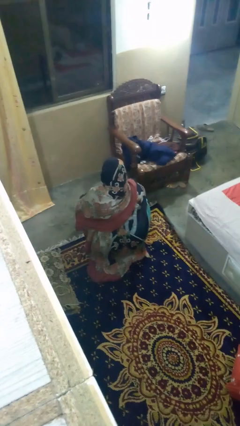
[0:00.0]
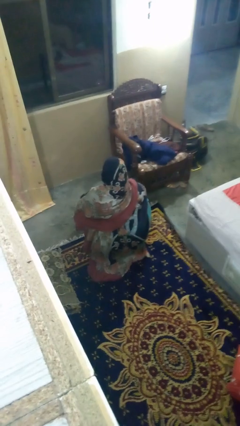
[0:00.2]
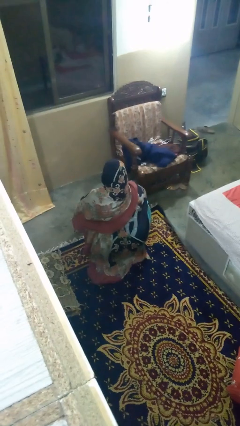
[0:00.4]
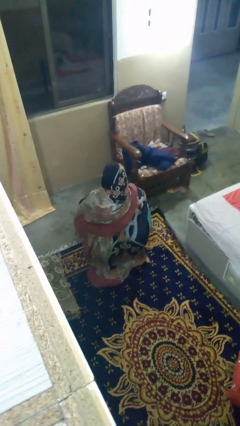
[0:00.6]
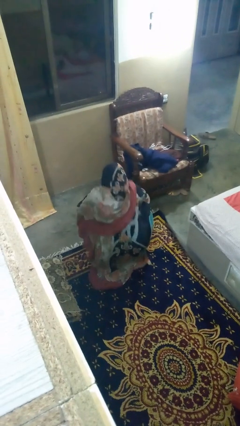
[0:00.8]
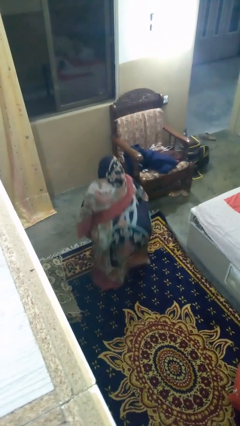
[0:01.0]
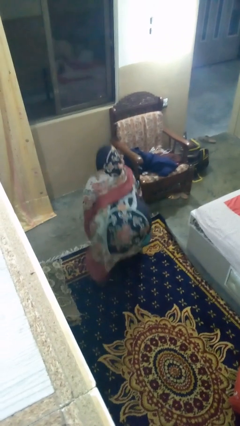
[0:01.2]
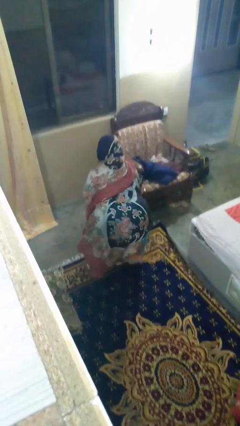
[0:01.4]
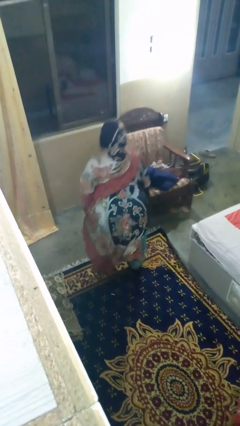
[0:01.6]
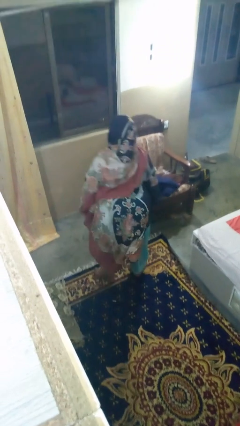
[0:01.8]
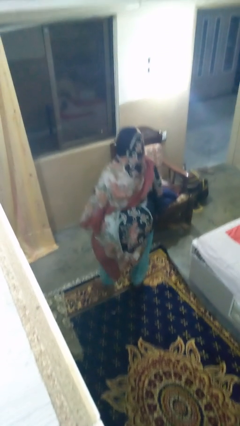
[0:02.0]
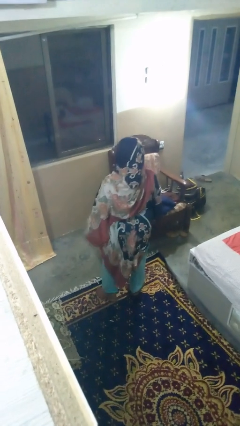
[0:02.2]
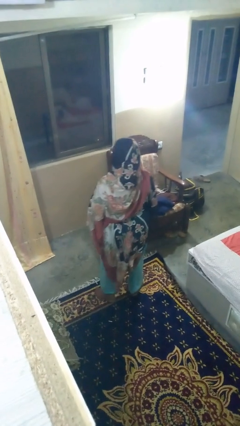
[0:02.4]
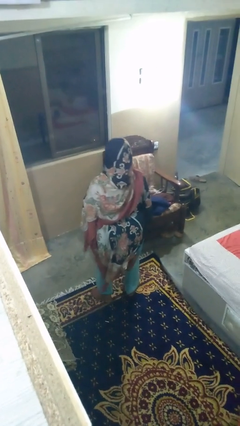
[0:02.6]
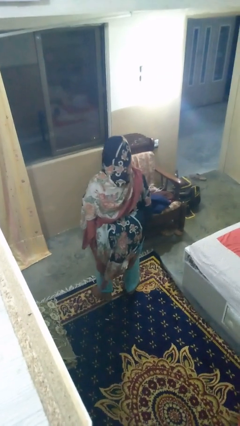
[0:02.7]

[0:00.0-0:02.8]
person stands up

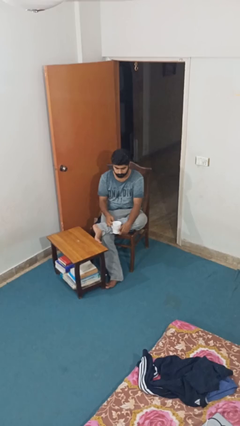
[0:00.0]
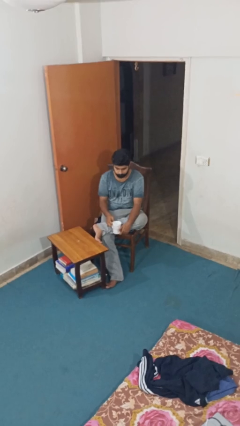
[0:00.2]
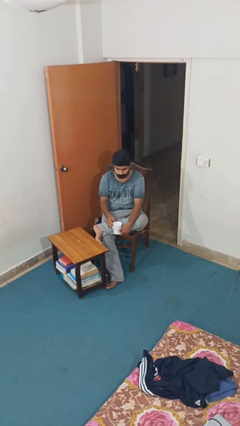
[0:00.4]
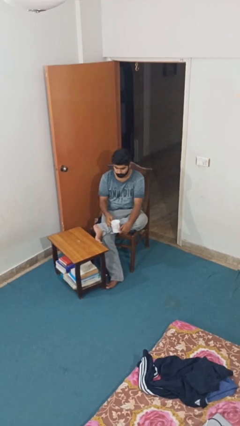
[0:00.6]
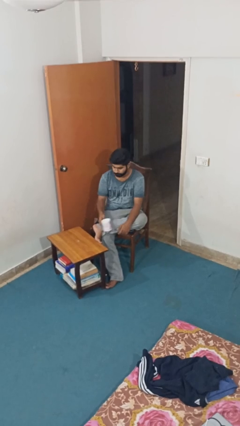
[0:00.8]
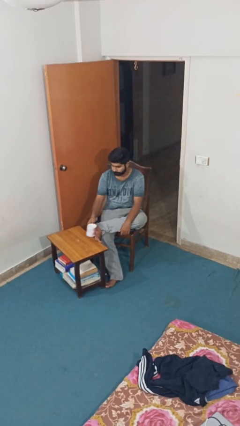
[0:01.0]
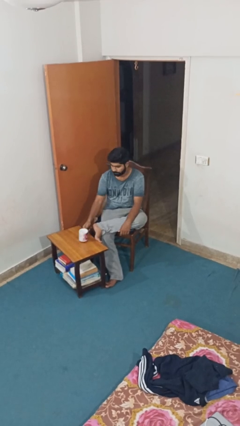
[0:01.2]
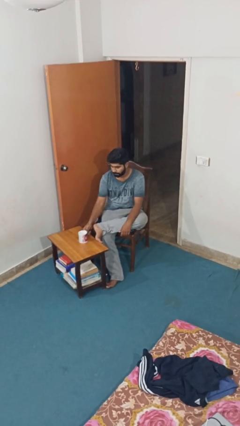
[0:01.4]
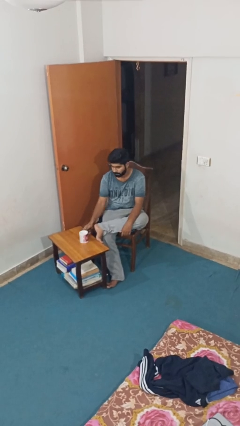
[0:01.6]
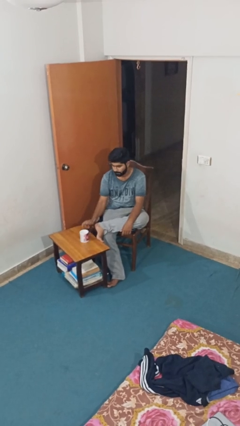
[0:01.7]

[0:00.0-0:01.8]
person puts down object on table

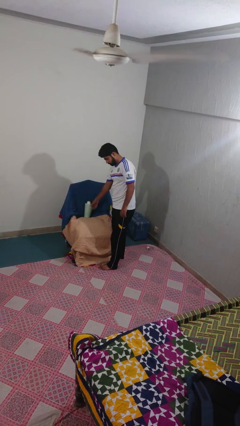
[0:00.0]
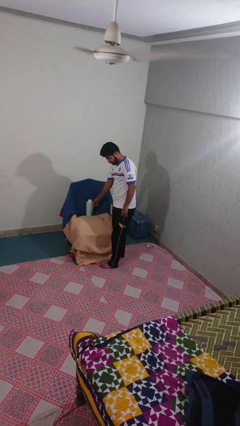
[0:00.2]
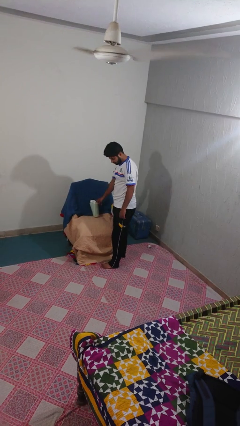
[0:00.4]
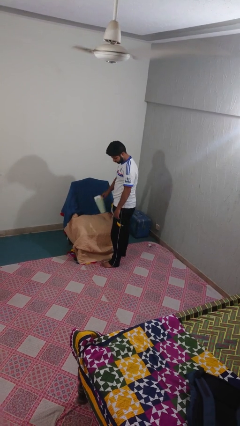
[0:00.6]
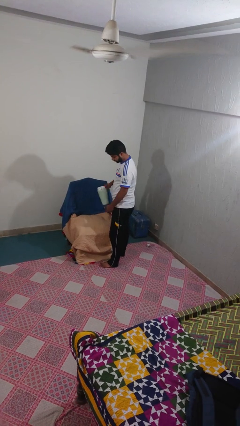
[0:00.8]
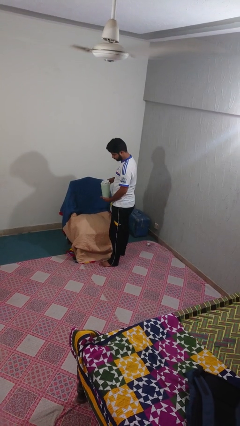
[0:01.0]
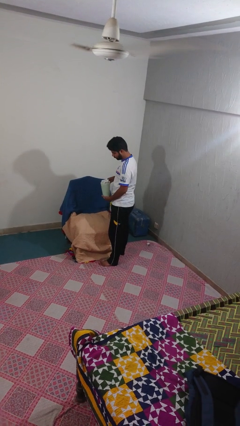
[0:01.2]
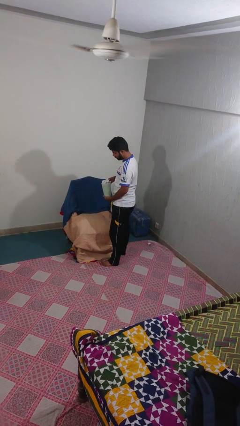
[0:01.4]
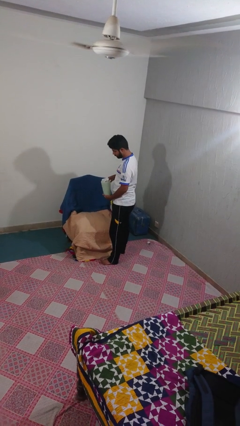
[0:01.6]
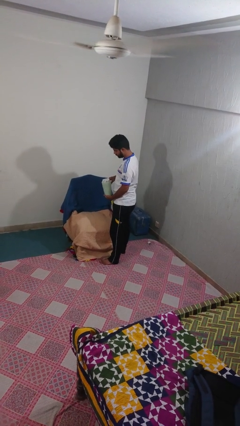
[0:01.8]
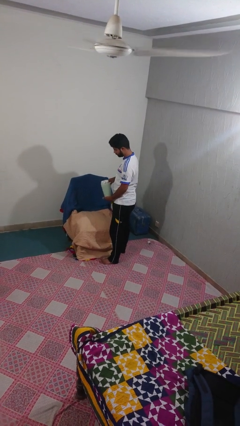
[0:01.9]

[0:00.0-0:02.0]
person picks up object from couch

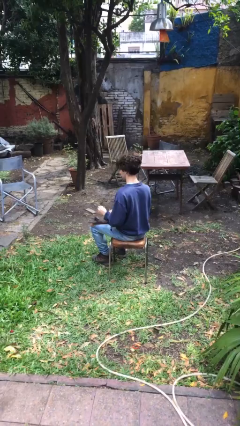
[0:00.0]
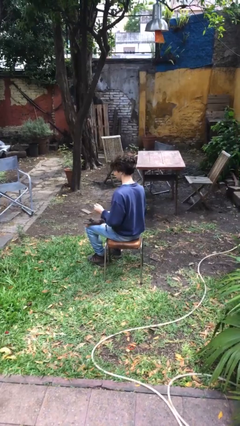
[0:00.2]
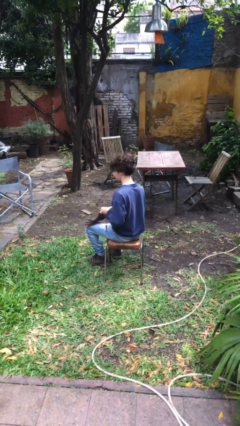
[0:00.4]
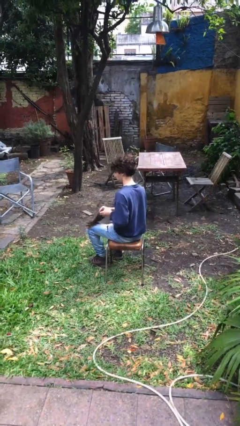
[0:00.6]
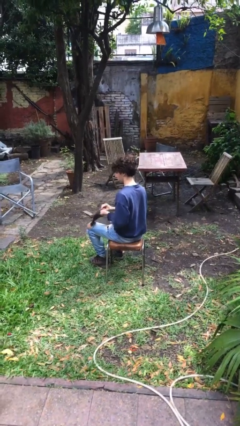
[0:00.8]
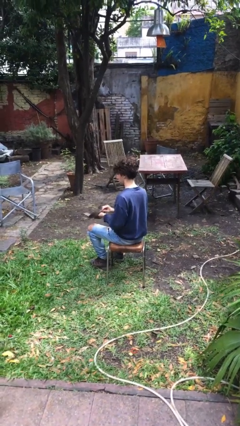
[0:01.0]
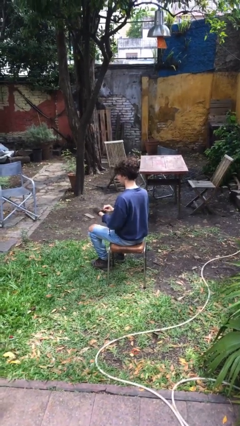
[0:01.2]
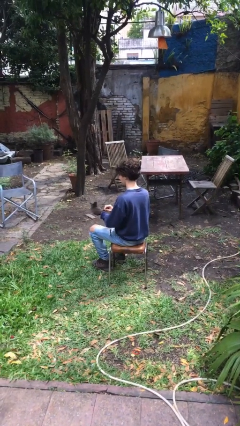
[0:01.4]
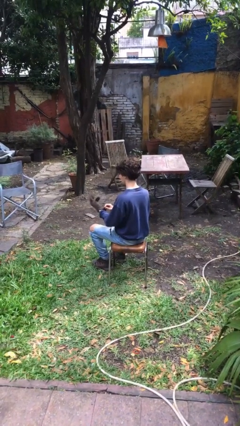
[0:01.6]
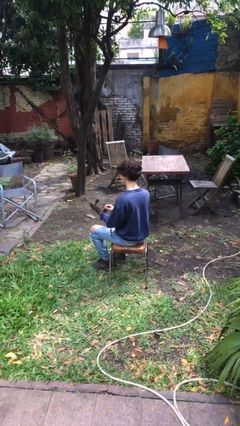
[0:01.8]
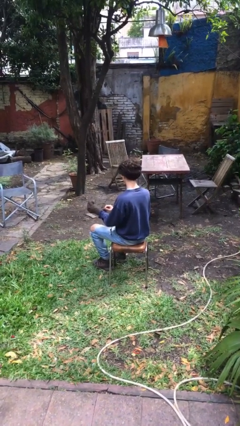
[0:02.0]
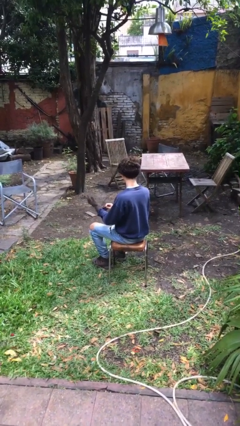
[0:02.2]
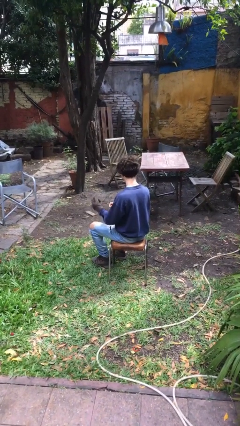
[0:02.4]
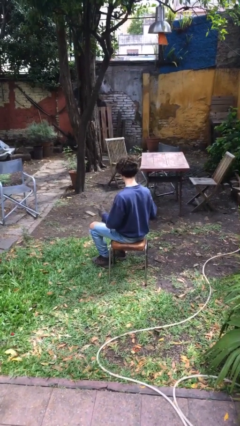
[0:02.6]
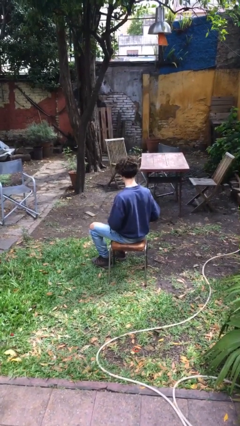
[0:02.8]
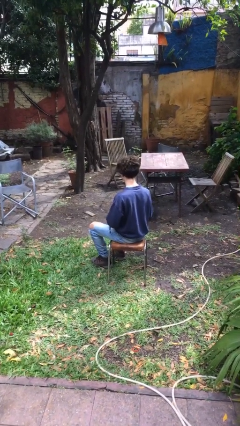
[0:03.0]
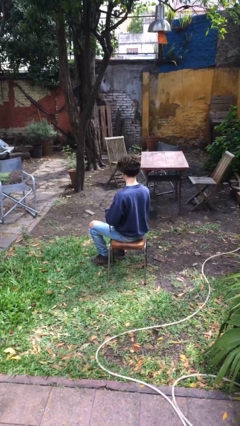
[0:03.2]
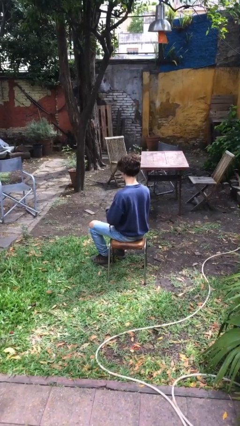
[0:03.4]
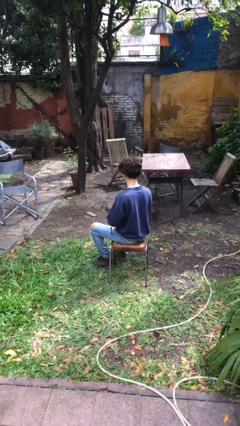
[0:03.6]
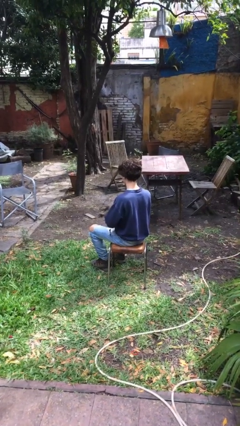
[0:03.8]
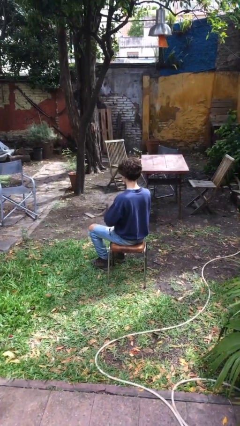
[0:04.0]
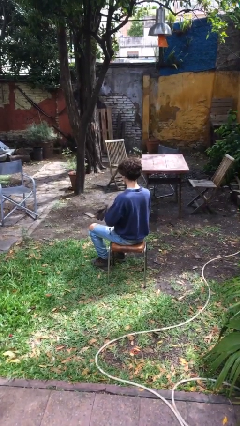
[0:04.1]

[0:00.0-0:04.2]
person puts on gloves

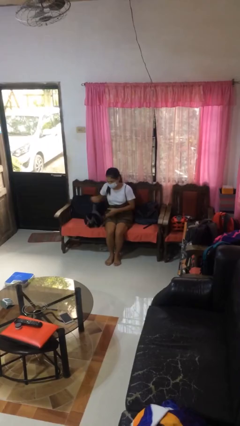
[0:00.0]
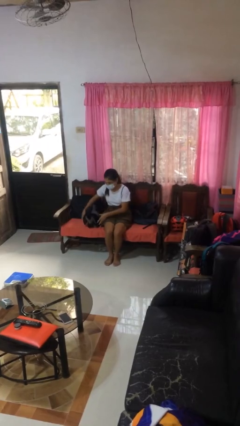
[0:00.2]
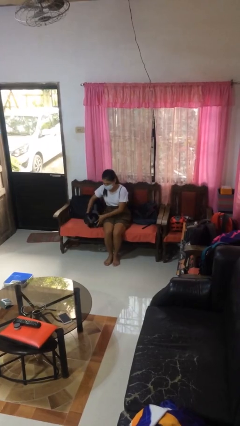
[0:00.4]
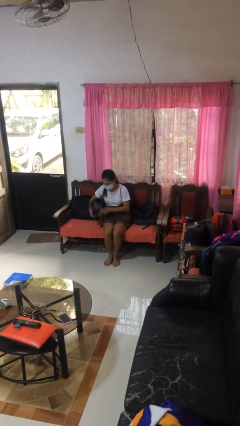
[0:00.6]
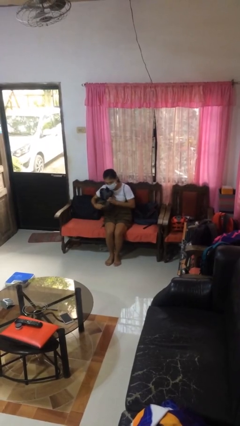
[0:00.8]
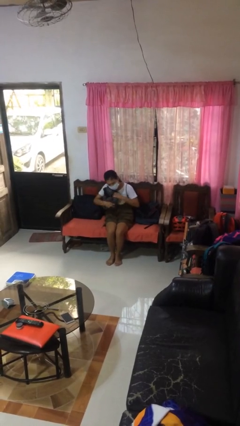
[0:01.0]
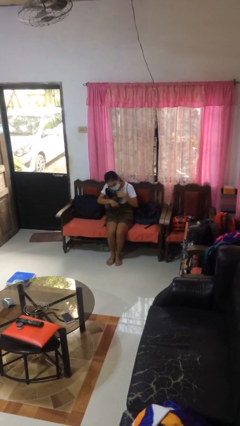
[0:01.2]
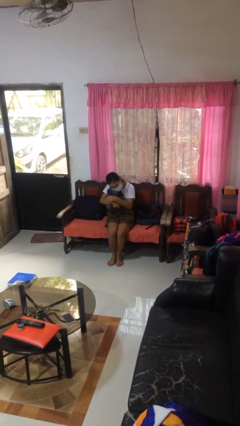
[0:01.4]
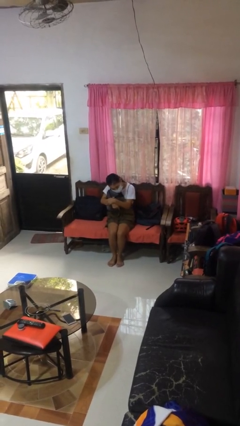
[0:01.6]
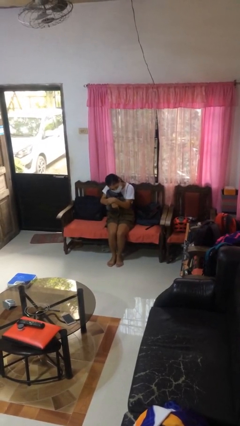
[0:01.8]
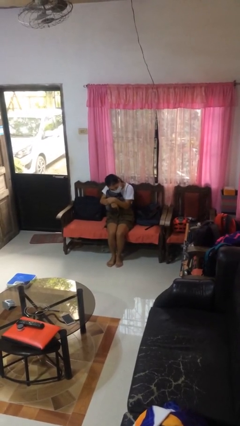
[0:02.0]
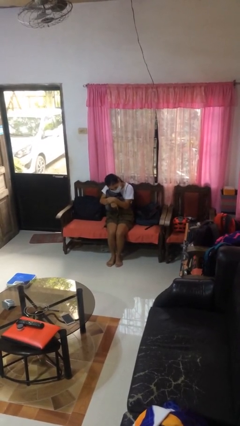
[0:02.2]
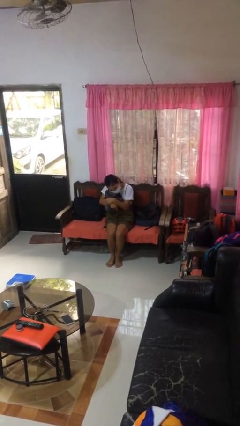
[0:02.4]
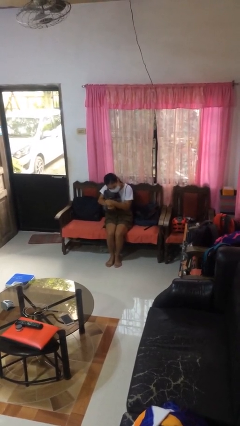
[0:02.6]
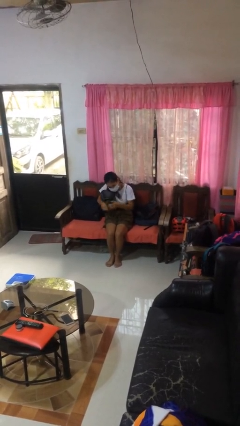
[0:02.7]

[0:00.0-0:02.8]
person hugs stuffed animal

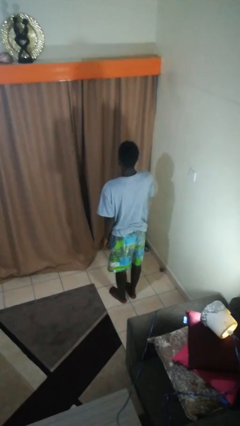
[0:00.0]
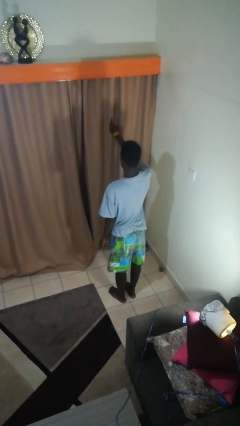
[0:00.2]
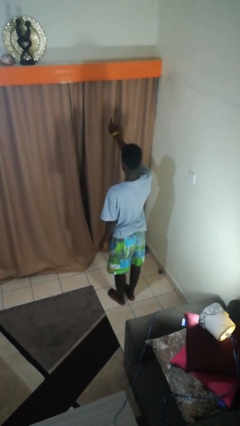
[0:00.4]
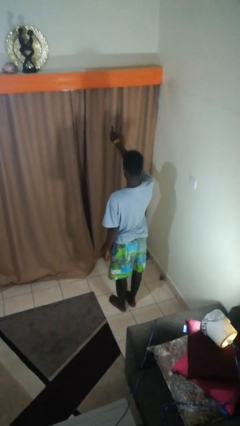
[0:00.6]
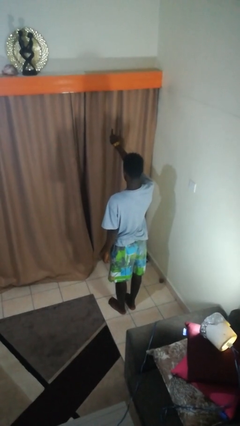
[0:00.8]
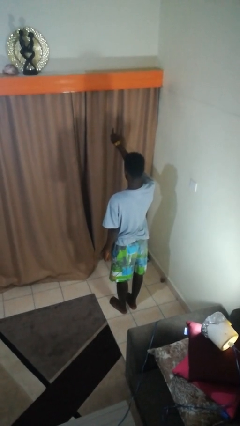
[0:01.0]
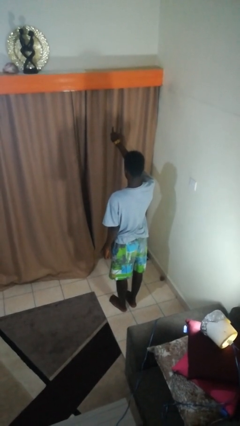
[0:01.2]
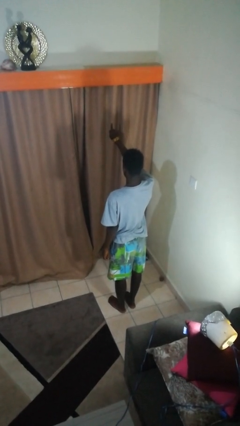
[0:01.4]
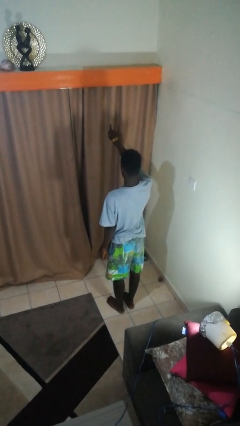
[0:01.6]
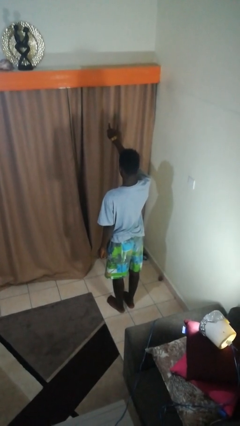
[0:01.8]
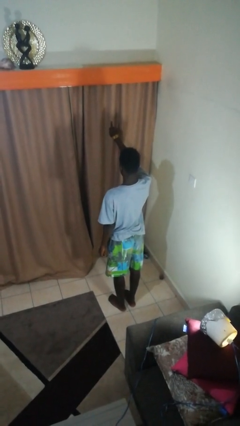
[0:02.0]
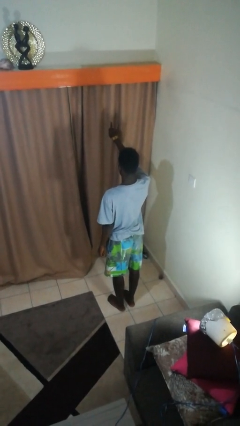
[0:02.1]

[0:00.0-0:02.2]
person gestures number one

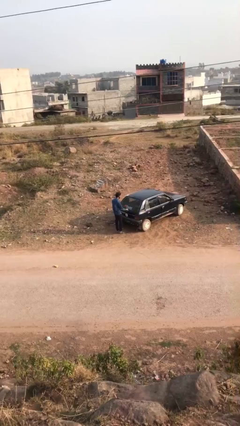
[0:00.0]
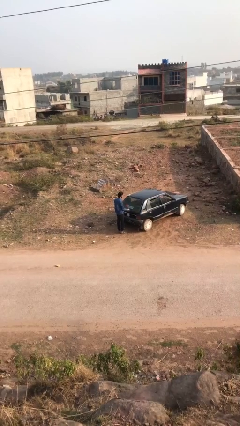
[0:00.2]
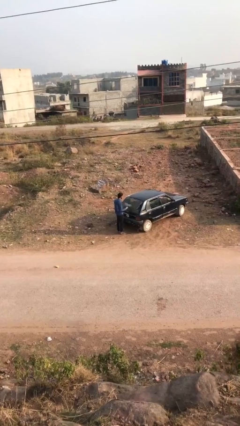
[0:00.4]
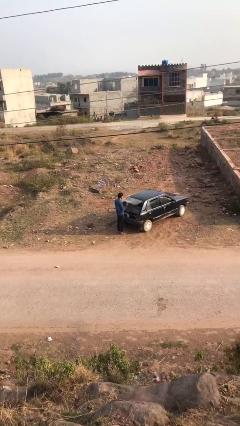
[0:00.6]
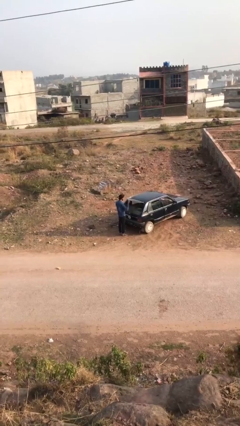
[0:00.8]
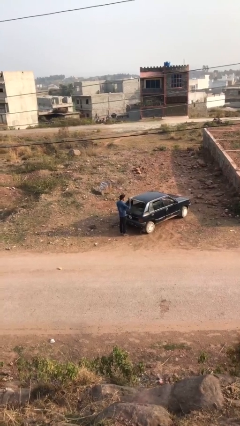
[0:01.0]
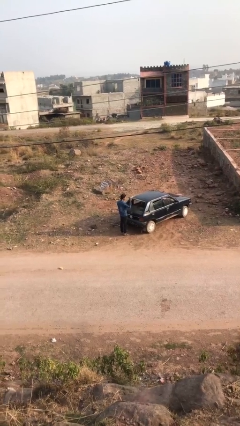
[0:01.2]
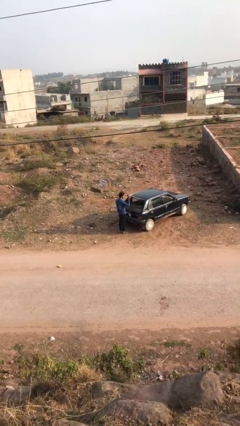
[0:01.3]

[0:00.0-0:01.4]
person opens car trunk

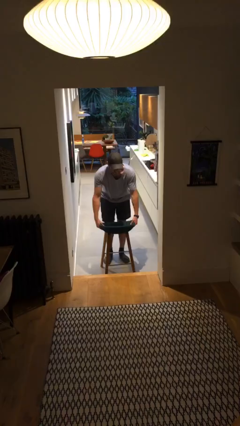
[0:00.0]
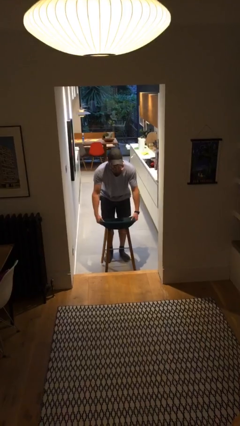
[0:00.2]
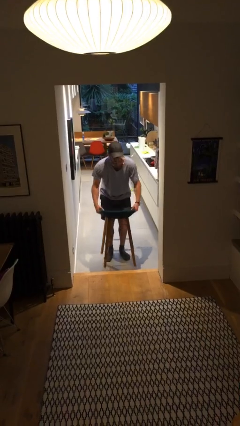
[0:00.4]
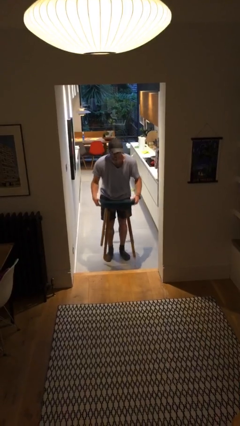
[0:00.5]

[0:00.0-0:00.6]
person picks up object from floor
